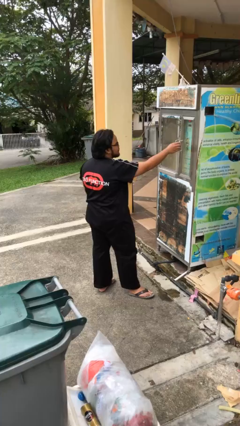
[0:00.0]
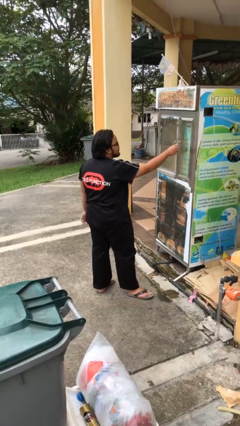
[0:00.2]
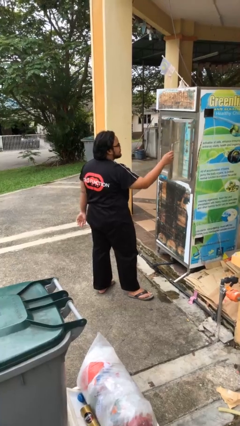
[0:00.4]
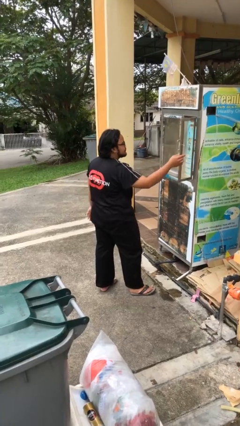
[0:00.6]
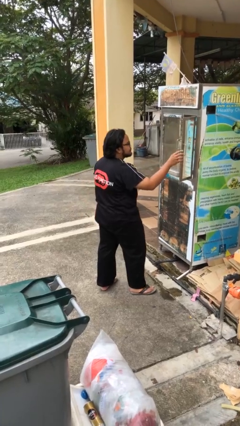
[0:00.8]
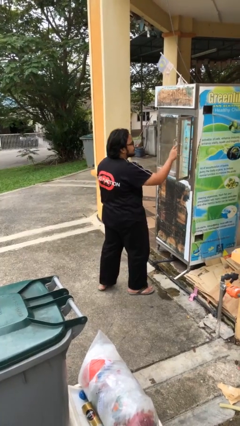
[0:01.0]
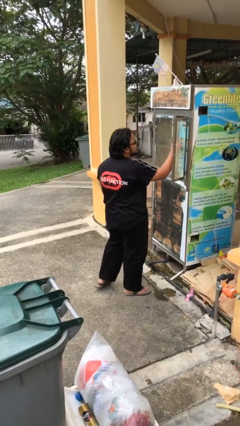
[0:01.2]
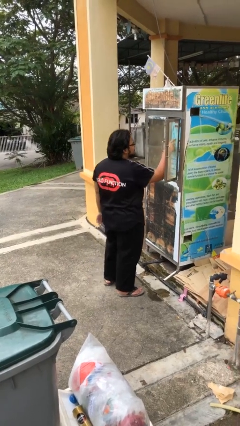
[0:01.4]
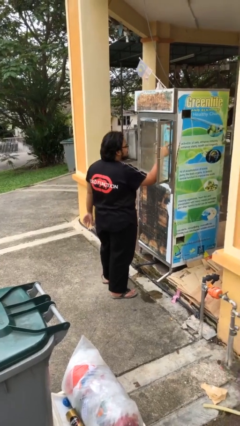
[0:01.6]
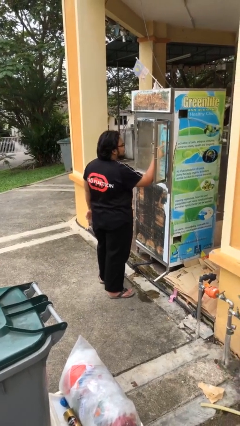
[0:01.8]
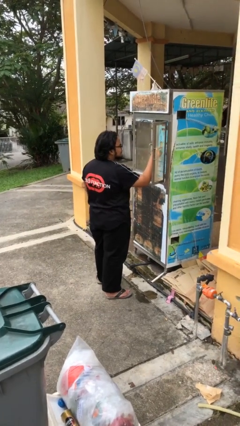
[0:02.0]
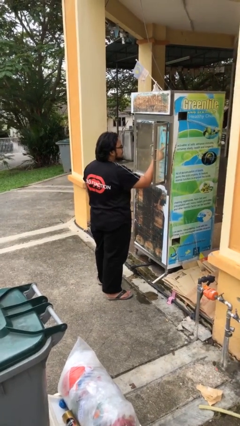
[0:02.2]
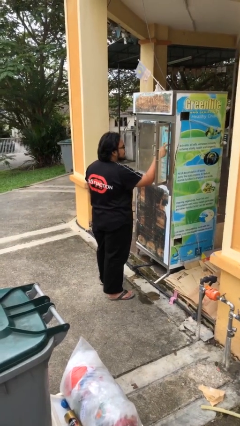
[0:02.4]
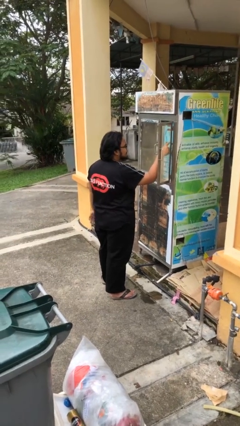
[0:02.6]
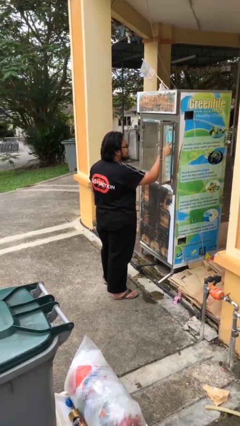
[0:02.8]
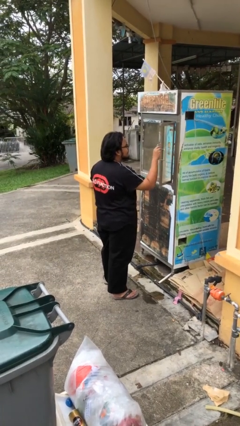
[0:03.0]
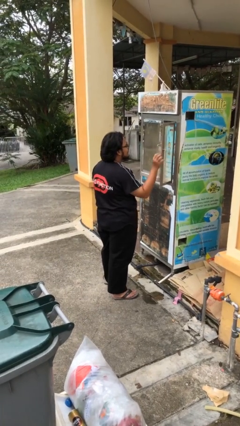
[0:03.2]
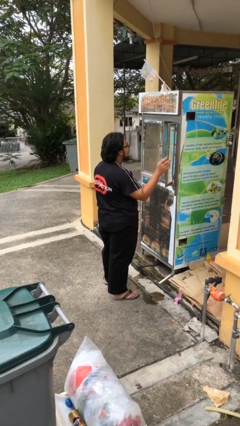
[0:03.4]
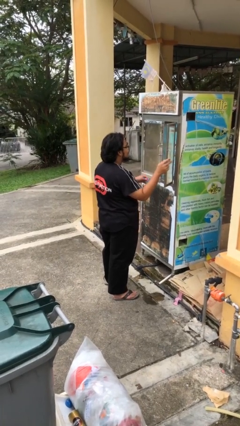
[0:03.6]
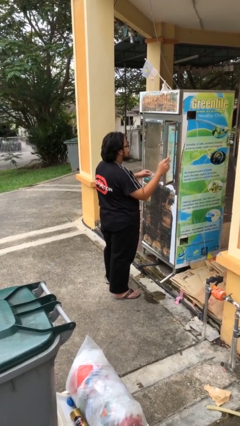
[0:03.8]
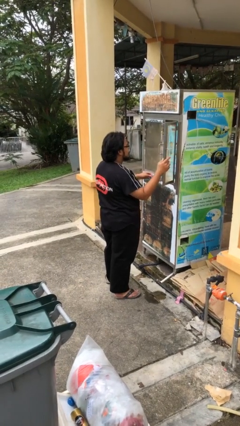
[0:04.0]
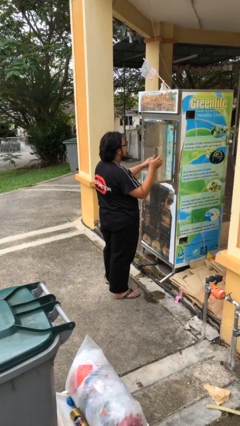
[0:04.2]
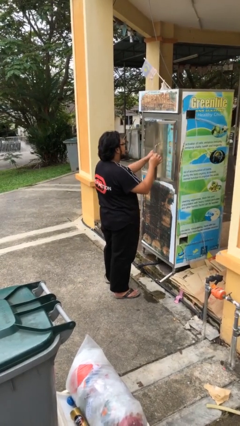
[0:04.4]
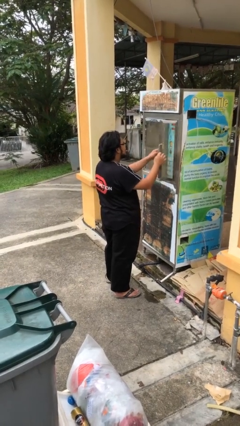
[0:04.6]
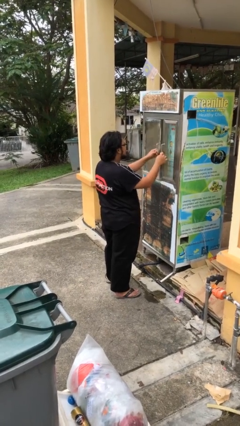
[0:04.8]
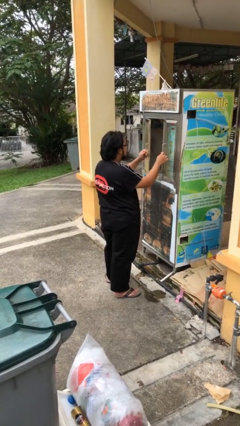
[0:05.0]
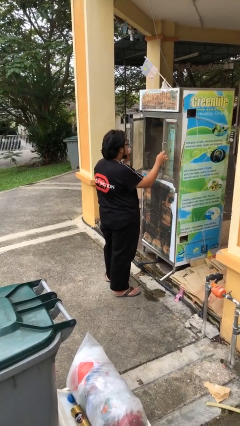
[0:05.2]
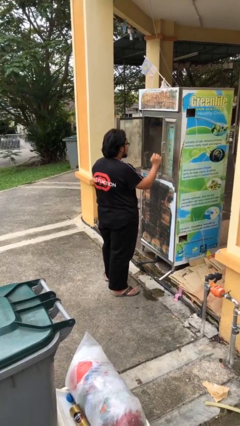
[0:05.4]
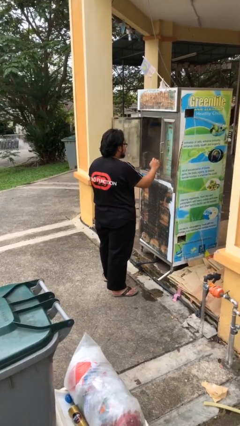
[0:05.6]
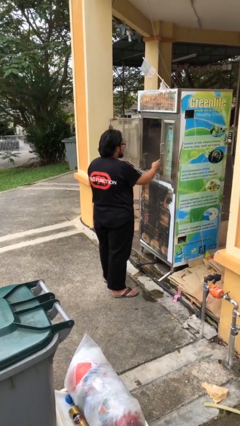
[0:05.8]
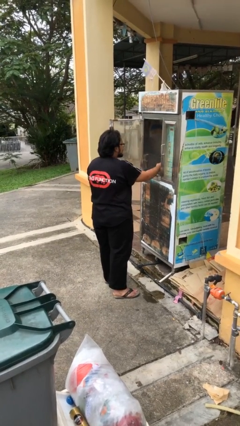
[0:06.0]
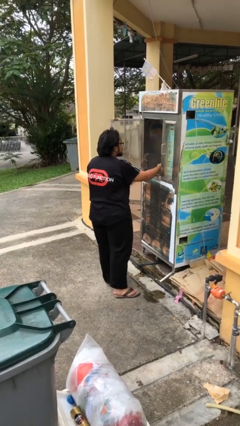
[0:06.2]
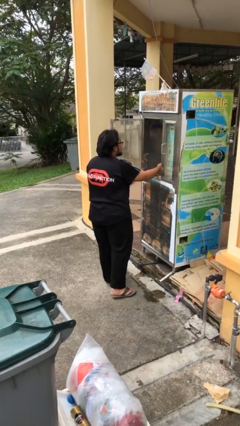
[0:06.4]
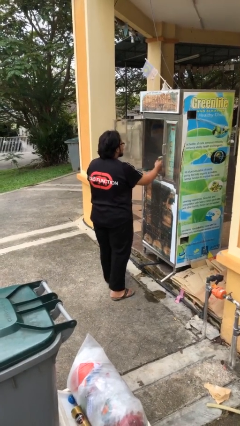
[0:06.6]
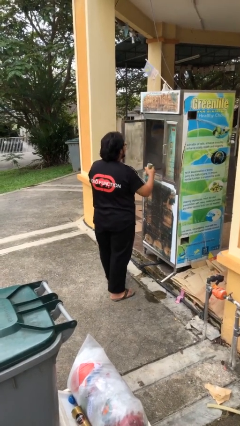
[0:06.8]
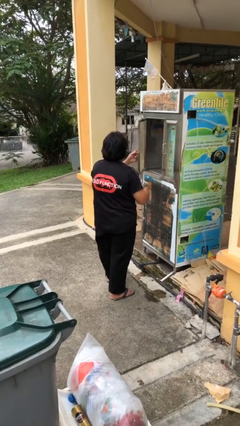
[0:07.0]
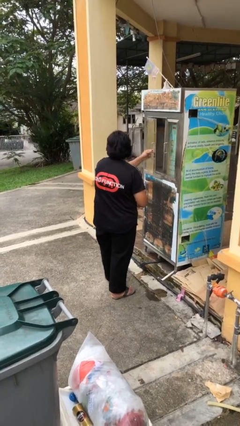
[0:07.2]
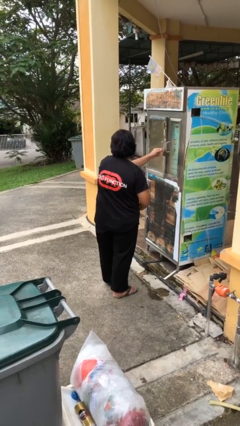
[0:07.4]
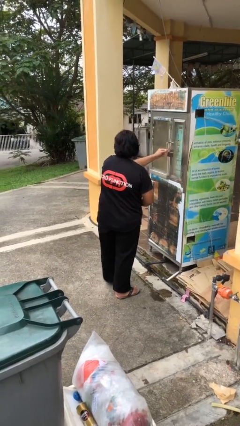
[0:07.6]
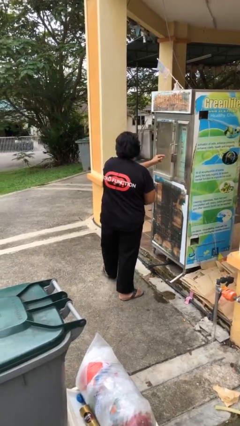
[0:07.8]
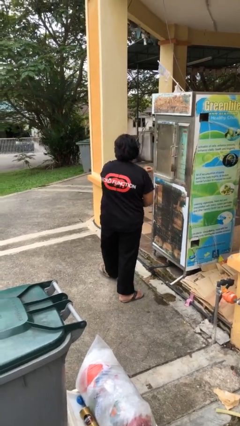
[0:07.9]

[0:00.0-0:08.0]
person purchases from machine

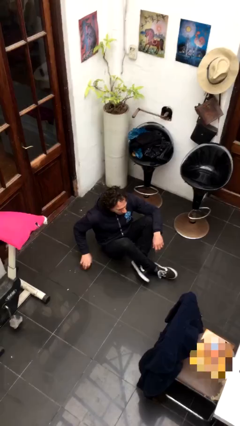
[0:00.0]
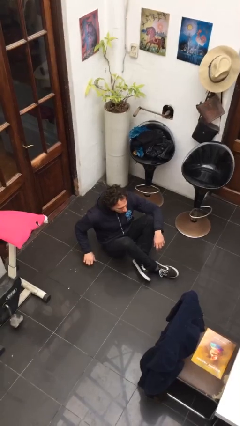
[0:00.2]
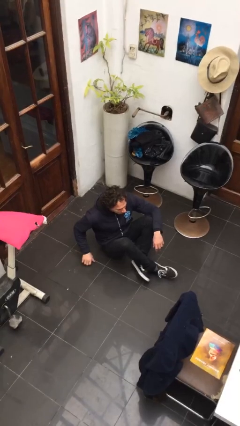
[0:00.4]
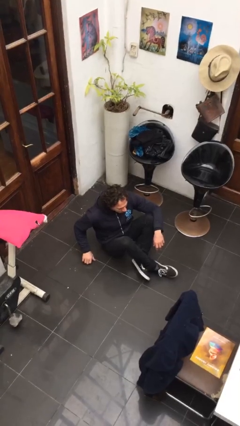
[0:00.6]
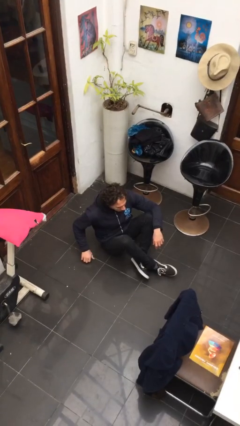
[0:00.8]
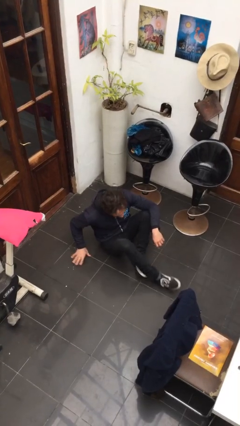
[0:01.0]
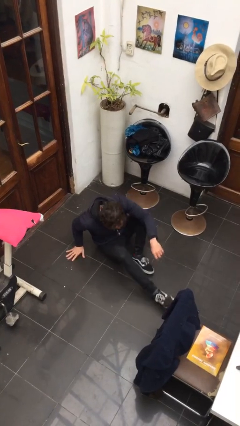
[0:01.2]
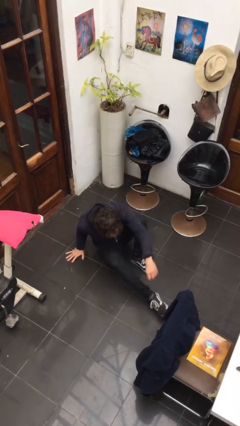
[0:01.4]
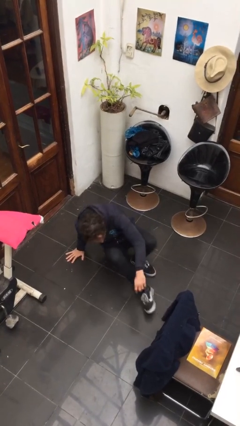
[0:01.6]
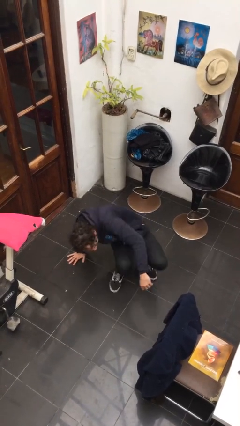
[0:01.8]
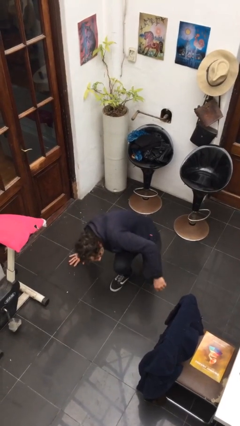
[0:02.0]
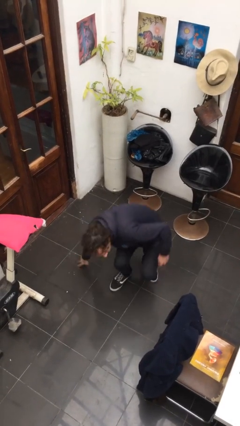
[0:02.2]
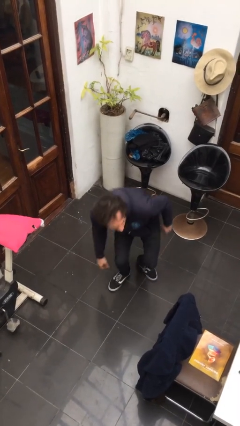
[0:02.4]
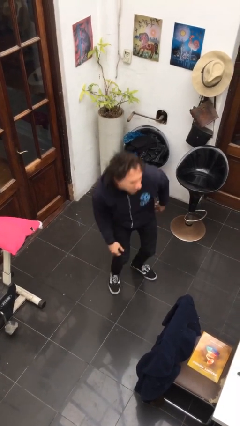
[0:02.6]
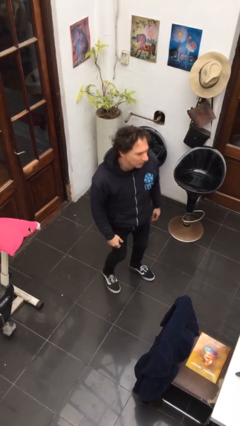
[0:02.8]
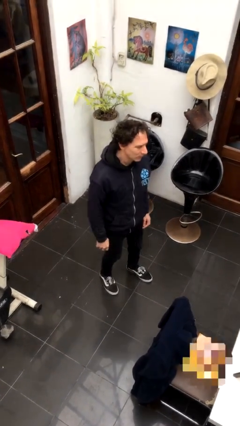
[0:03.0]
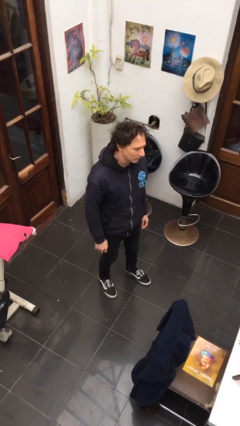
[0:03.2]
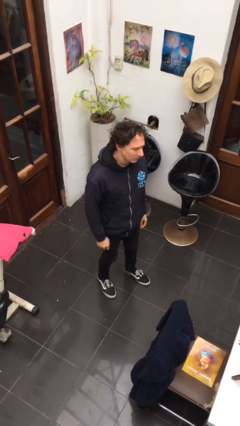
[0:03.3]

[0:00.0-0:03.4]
person stands up from floor

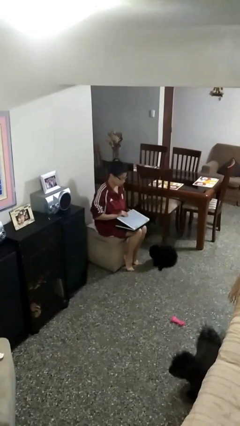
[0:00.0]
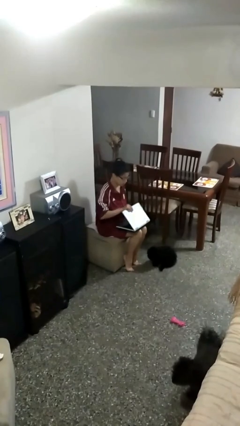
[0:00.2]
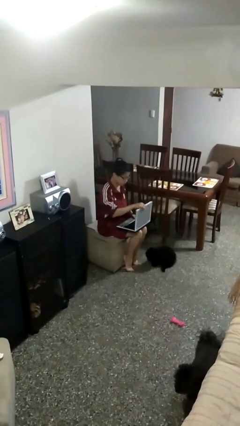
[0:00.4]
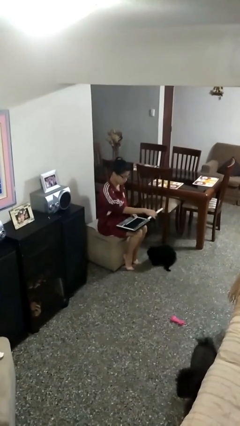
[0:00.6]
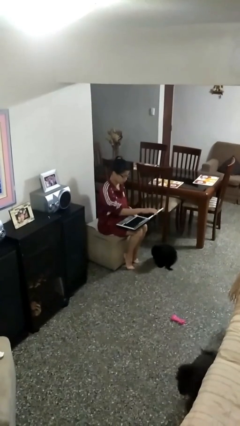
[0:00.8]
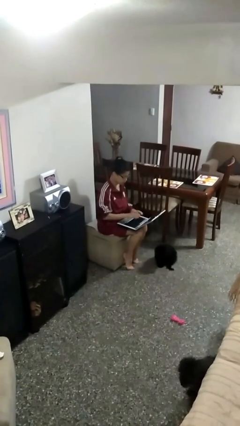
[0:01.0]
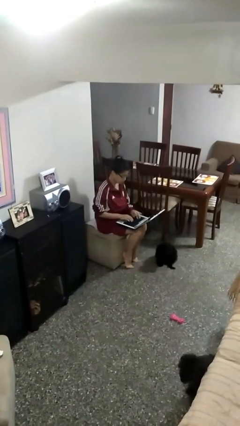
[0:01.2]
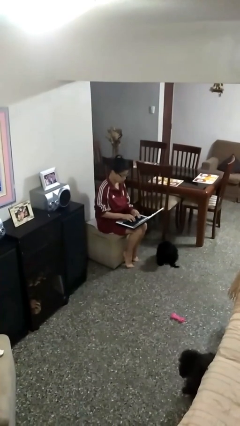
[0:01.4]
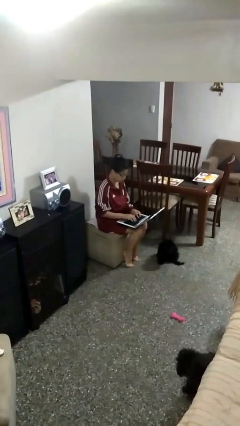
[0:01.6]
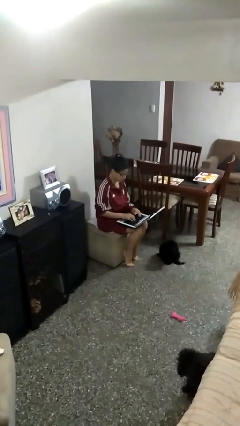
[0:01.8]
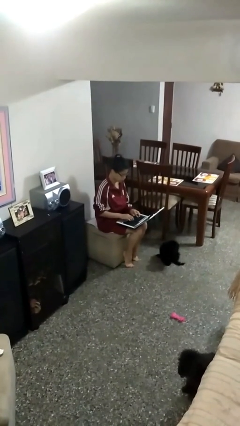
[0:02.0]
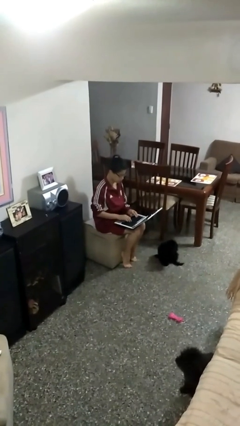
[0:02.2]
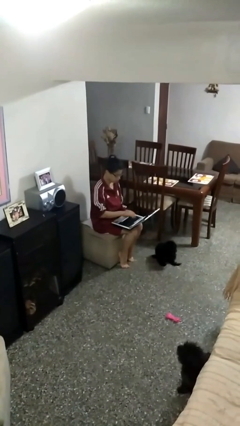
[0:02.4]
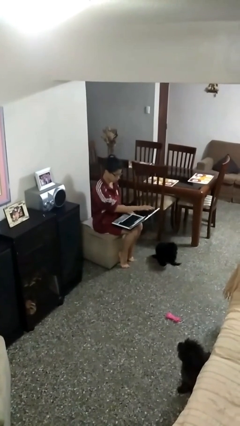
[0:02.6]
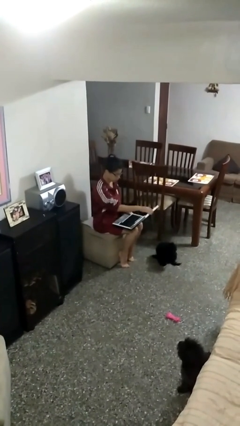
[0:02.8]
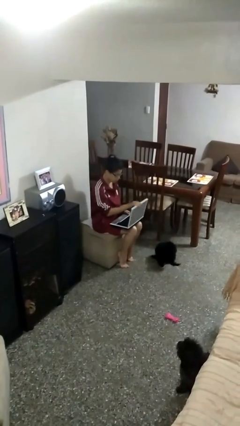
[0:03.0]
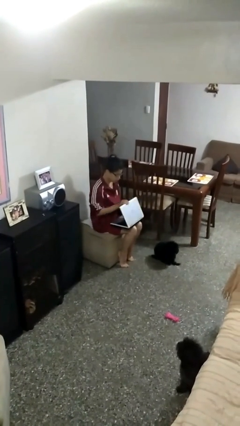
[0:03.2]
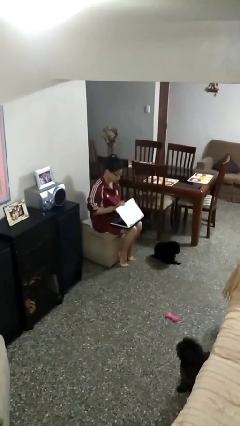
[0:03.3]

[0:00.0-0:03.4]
person interacts with laptop

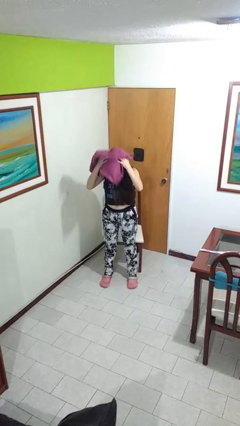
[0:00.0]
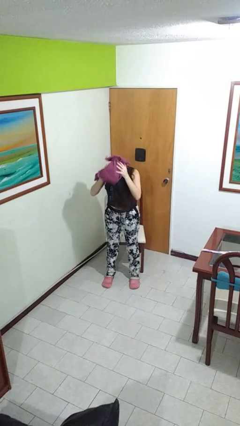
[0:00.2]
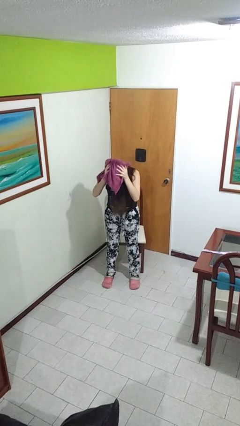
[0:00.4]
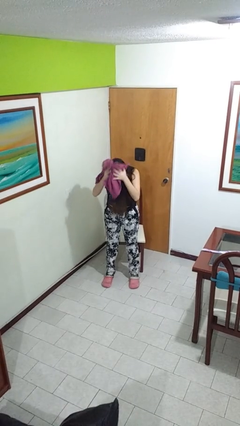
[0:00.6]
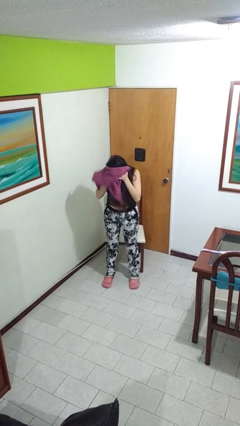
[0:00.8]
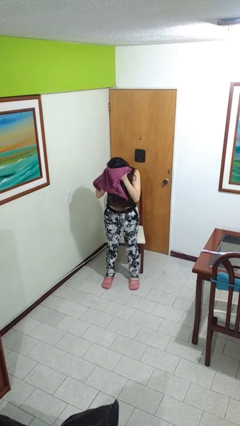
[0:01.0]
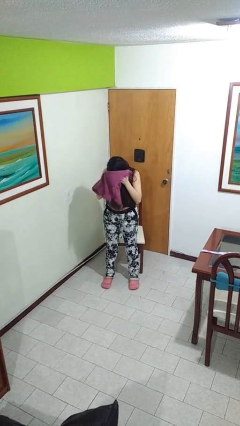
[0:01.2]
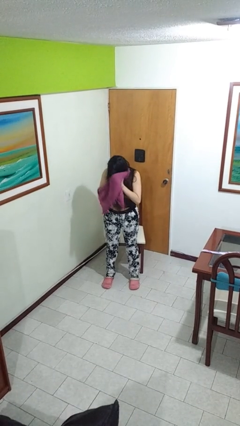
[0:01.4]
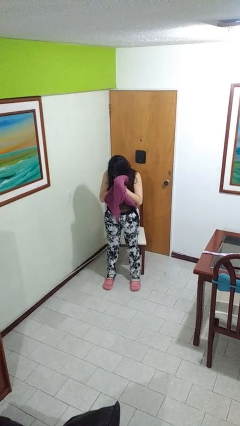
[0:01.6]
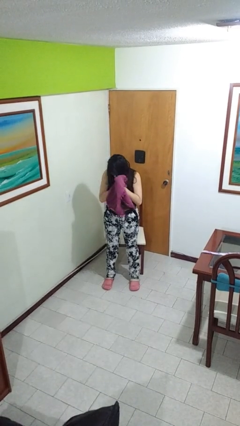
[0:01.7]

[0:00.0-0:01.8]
person dries hair with towel

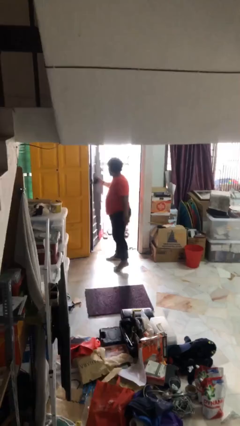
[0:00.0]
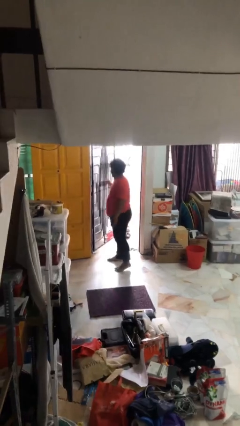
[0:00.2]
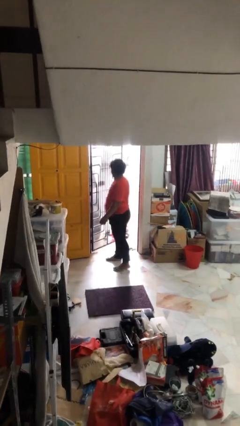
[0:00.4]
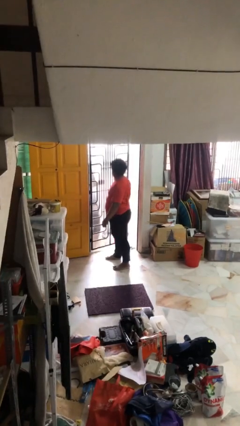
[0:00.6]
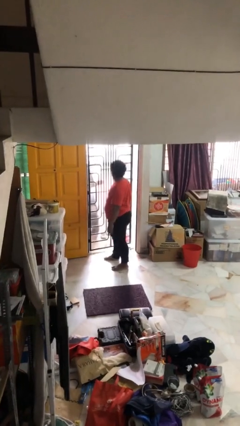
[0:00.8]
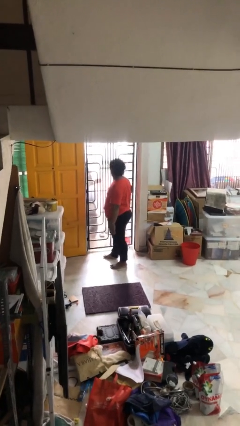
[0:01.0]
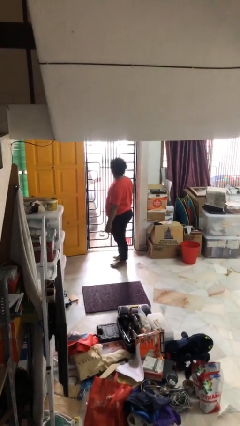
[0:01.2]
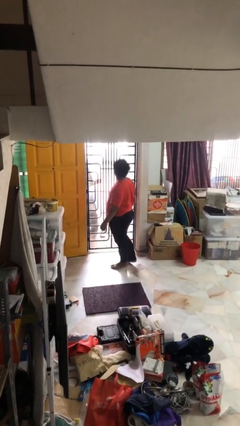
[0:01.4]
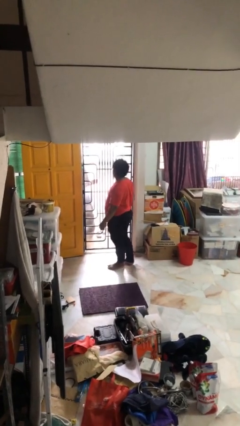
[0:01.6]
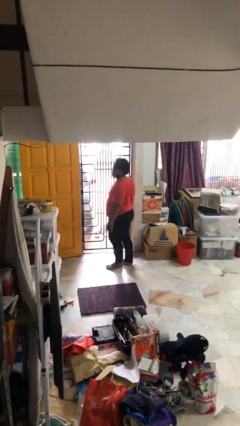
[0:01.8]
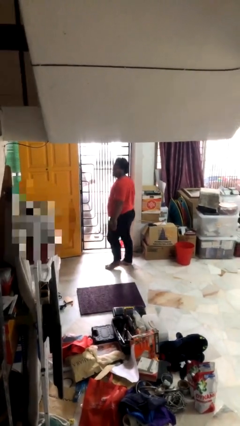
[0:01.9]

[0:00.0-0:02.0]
person closes facility door
